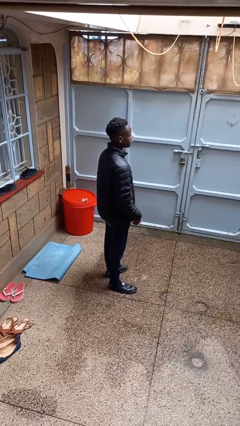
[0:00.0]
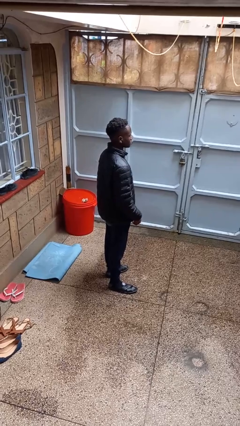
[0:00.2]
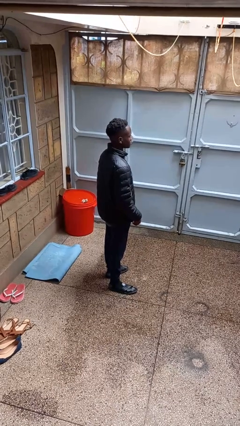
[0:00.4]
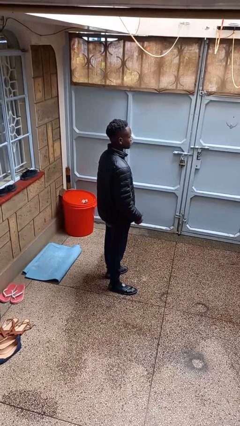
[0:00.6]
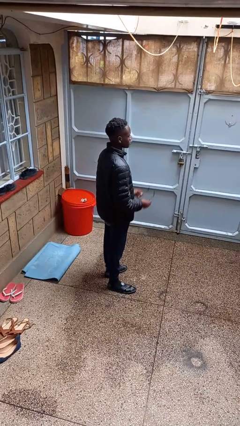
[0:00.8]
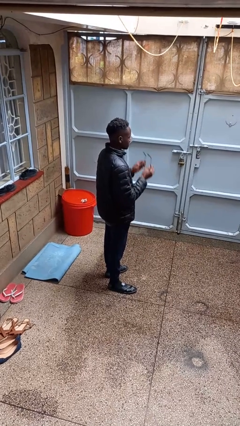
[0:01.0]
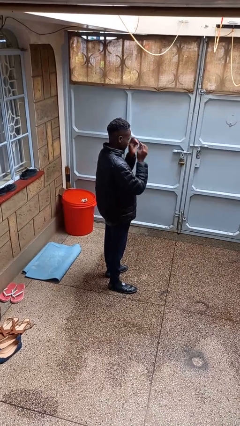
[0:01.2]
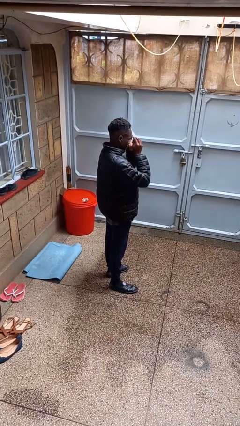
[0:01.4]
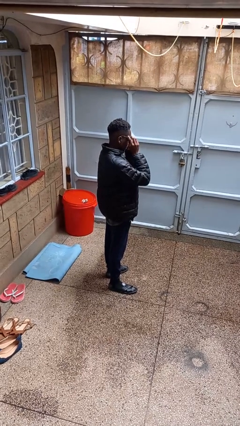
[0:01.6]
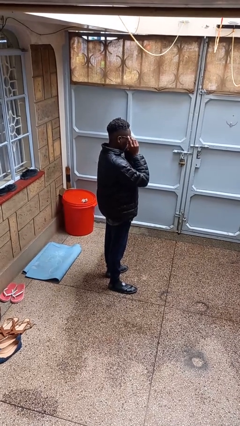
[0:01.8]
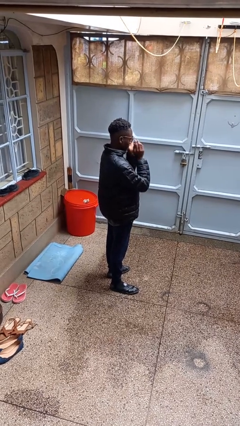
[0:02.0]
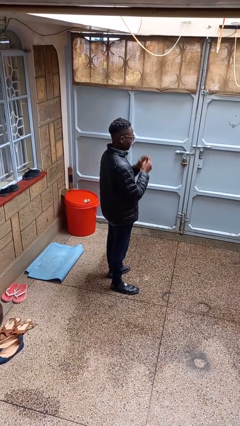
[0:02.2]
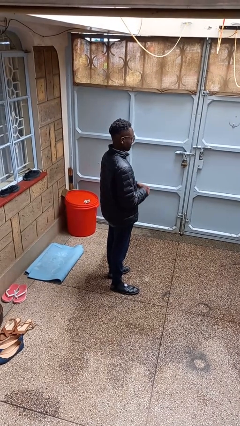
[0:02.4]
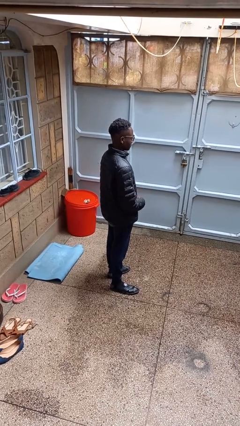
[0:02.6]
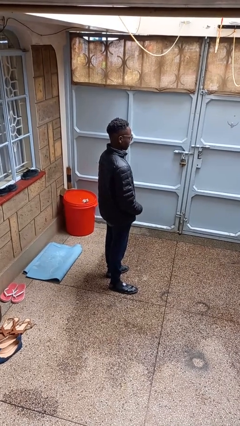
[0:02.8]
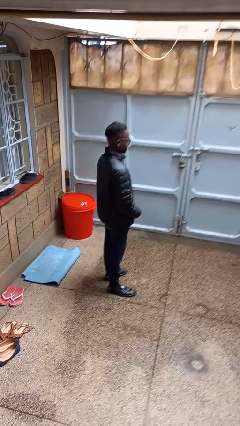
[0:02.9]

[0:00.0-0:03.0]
person puts on glasses

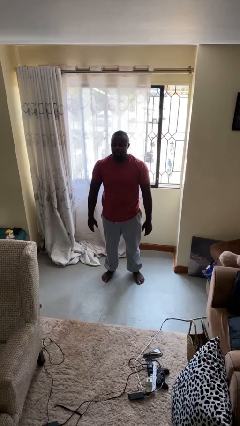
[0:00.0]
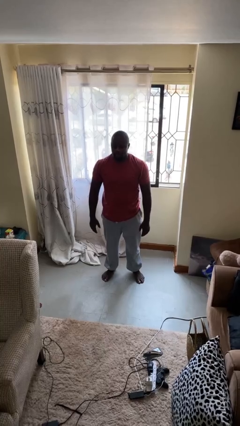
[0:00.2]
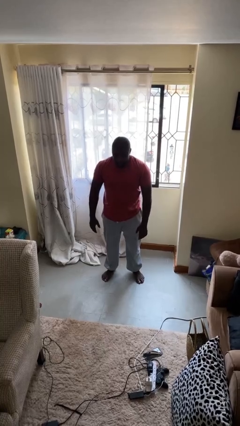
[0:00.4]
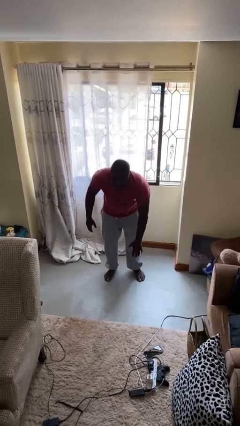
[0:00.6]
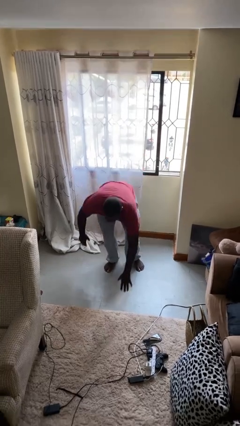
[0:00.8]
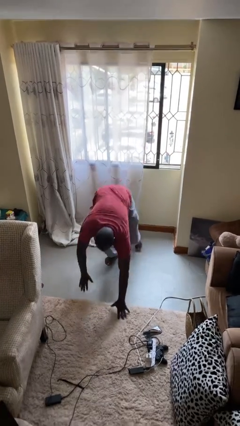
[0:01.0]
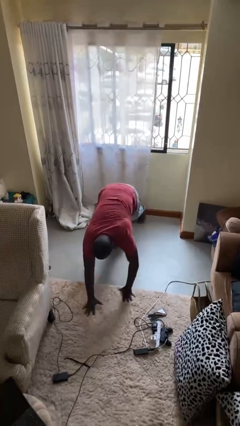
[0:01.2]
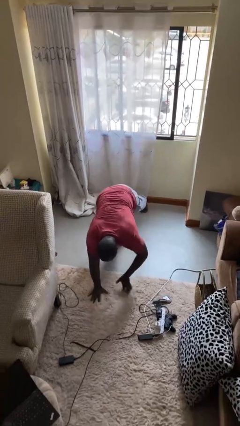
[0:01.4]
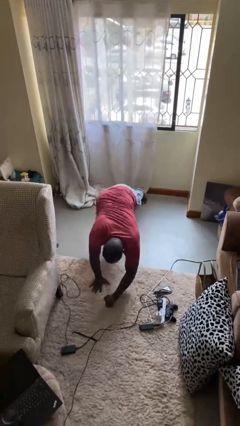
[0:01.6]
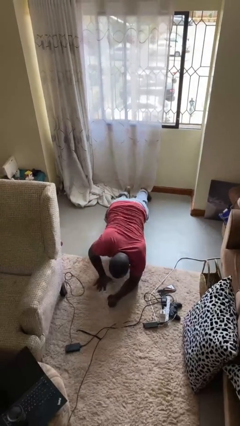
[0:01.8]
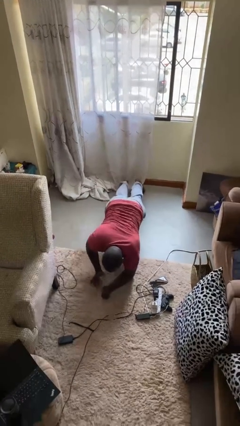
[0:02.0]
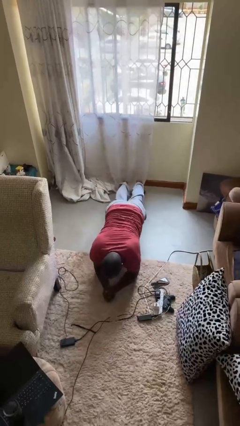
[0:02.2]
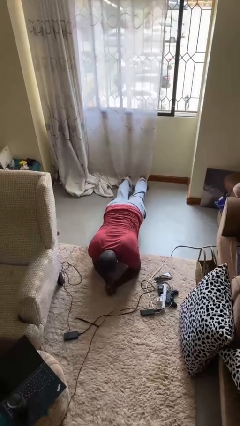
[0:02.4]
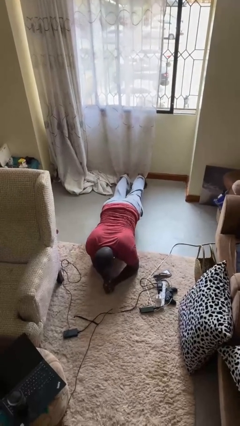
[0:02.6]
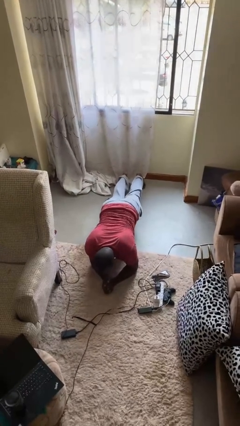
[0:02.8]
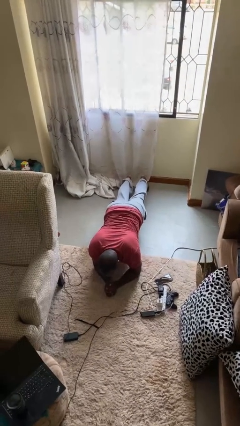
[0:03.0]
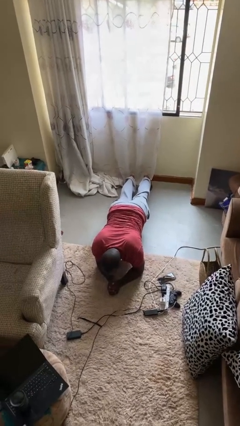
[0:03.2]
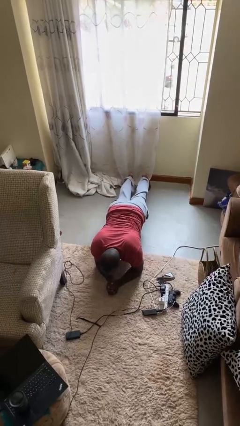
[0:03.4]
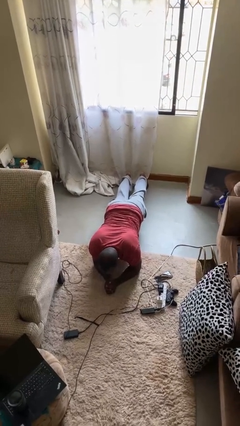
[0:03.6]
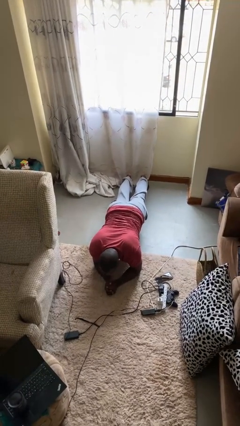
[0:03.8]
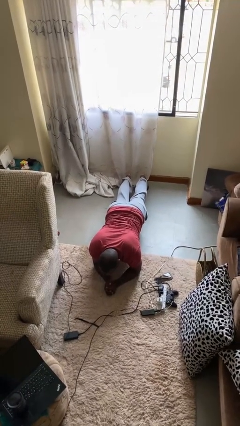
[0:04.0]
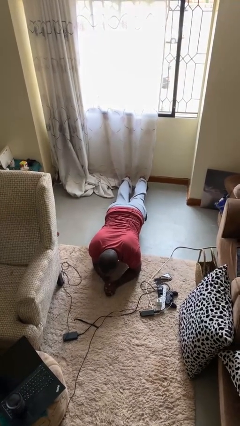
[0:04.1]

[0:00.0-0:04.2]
person exercises with plank

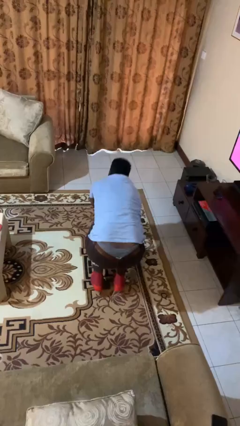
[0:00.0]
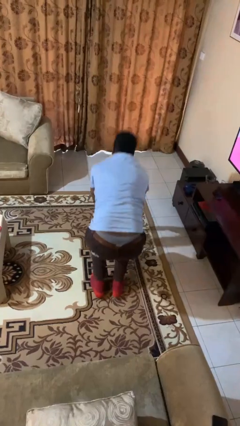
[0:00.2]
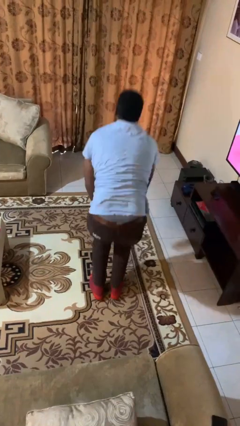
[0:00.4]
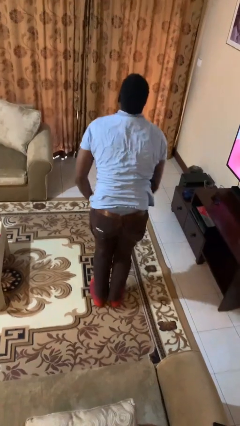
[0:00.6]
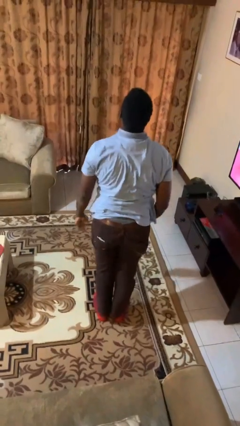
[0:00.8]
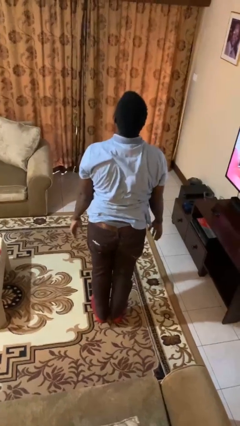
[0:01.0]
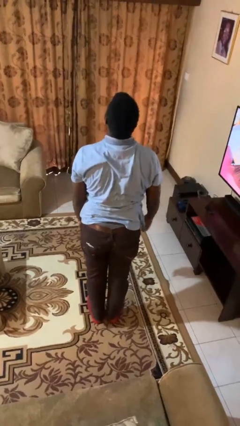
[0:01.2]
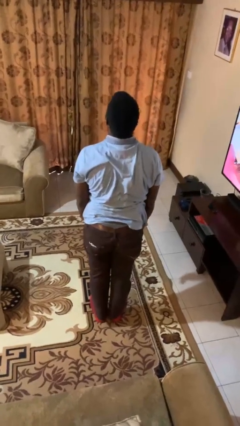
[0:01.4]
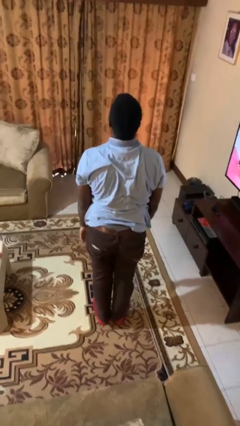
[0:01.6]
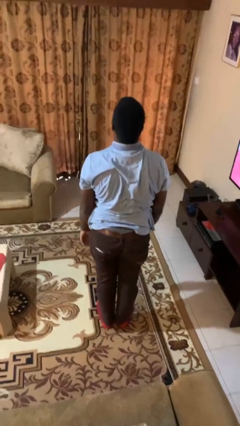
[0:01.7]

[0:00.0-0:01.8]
person stands up from floor

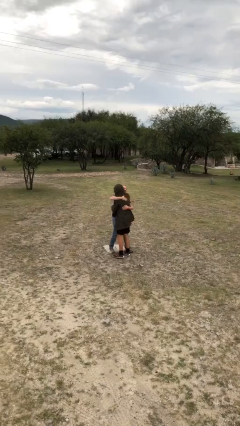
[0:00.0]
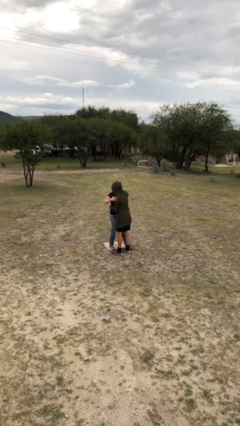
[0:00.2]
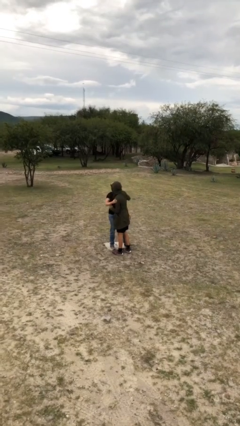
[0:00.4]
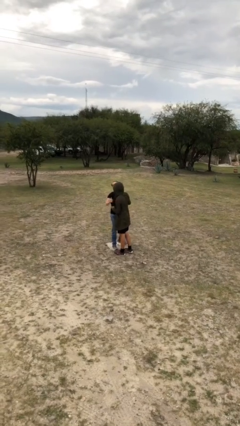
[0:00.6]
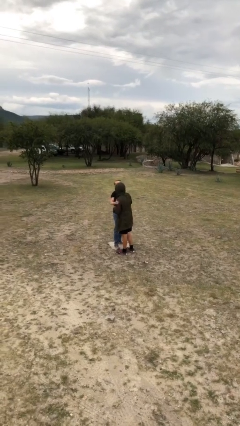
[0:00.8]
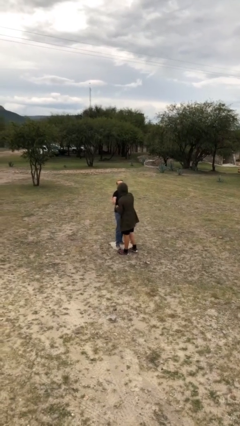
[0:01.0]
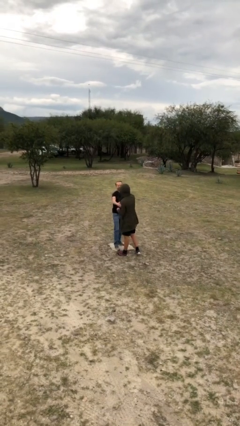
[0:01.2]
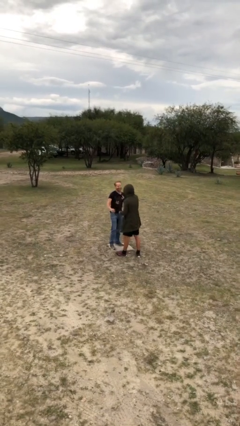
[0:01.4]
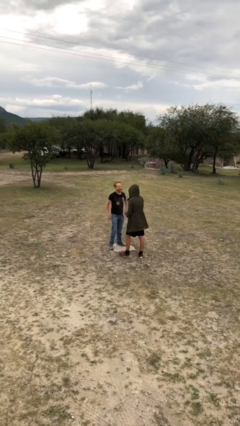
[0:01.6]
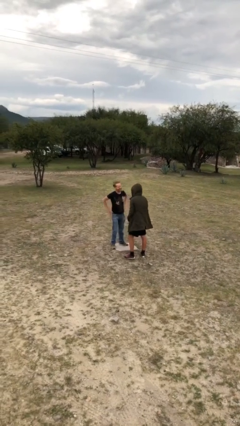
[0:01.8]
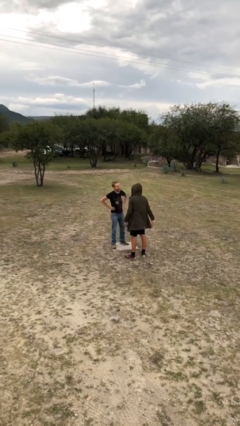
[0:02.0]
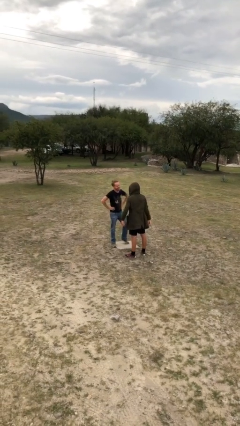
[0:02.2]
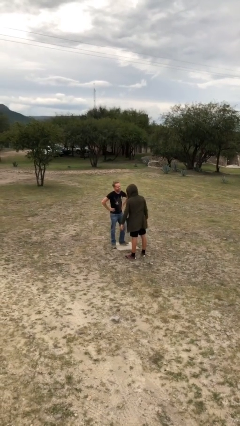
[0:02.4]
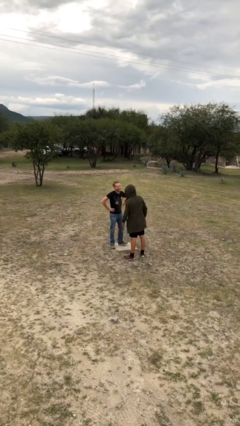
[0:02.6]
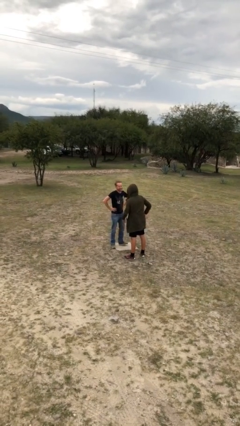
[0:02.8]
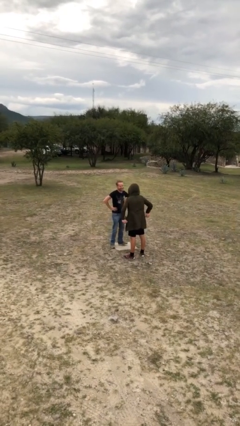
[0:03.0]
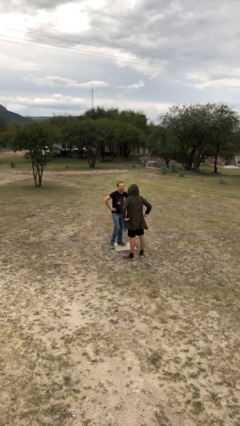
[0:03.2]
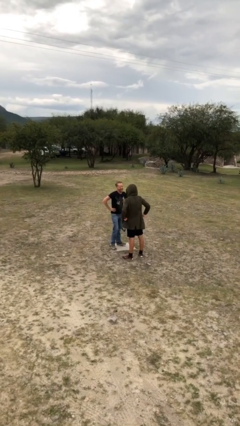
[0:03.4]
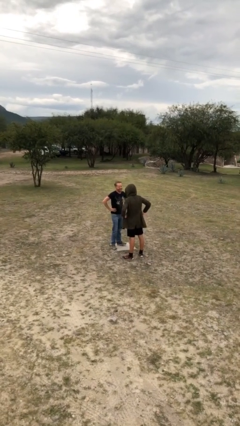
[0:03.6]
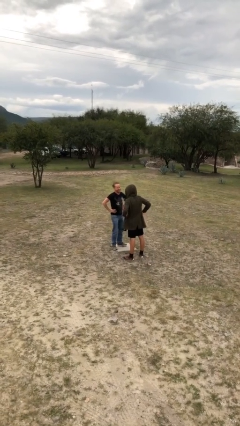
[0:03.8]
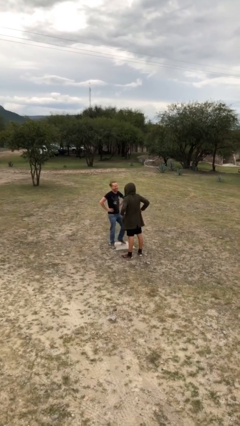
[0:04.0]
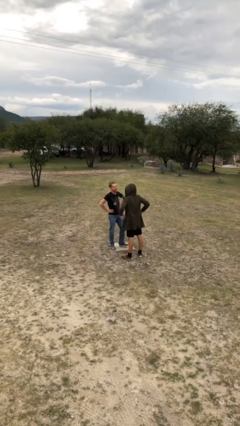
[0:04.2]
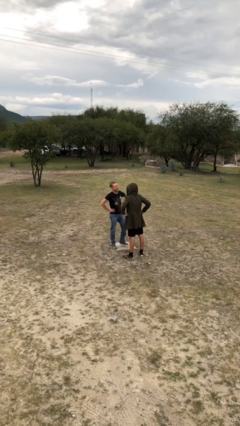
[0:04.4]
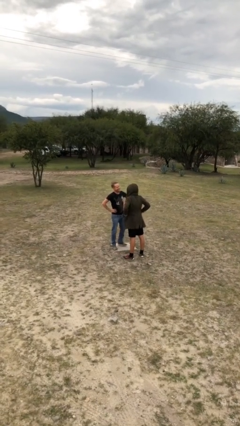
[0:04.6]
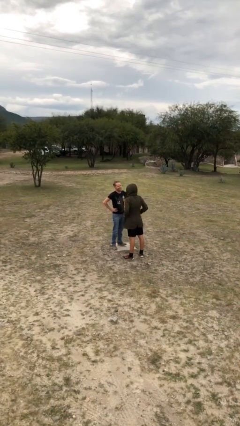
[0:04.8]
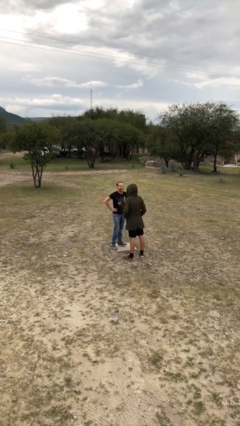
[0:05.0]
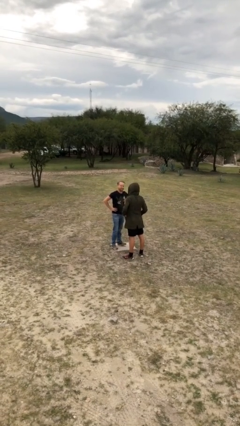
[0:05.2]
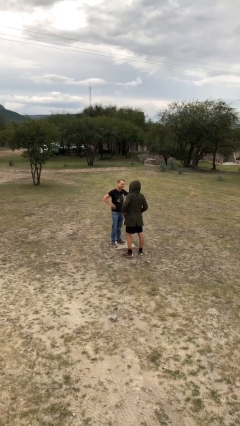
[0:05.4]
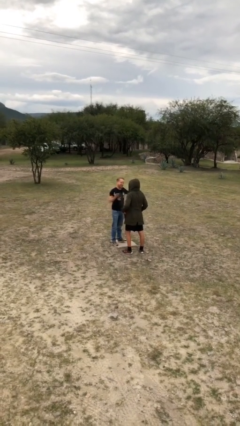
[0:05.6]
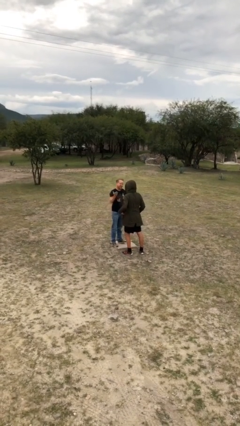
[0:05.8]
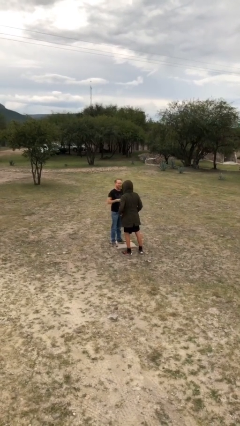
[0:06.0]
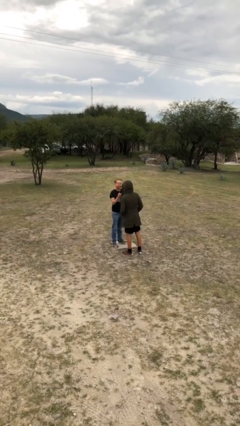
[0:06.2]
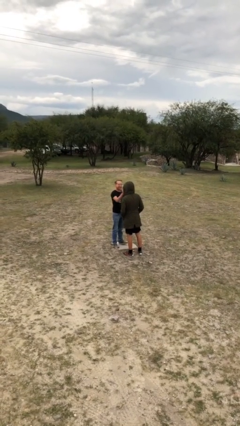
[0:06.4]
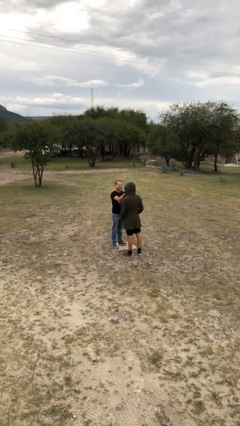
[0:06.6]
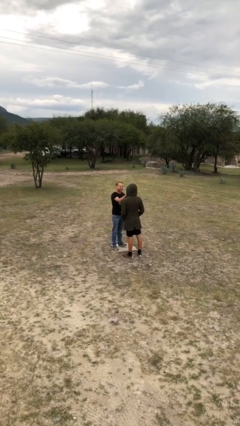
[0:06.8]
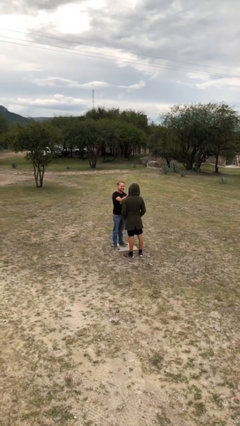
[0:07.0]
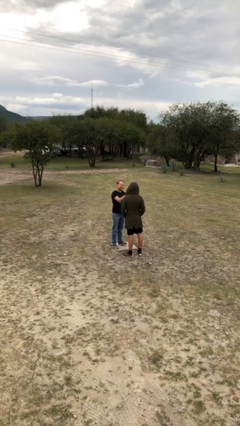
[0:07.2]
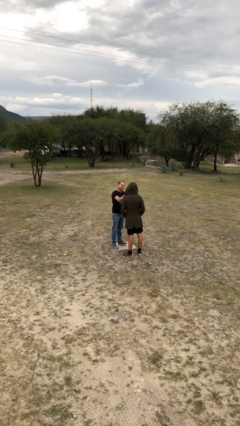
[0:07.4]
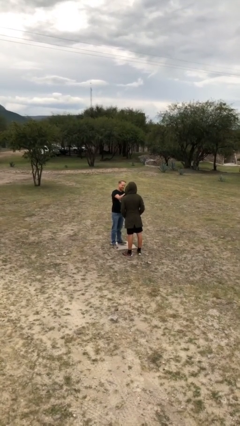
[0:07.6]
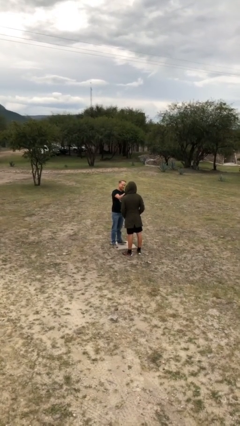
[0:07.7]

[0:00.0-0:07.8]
person talks to person

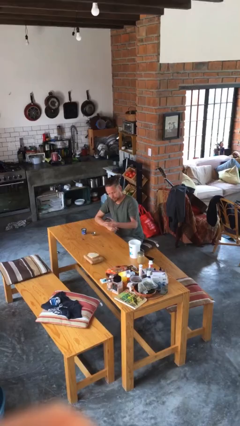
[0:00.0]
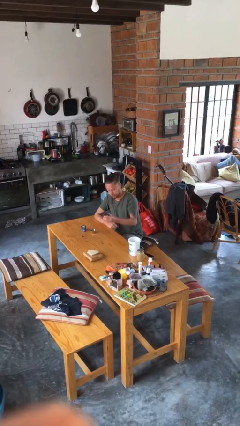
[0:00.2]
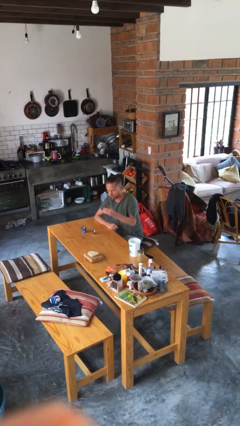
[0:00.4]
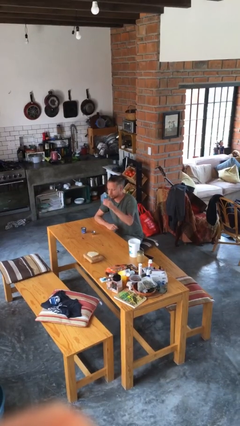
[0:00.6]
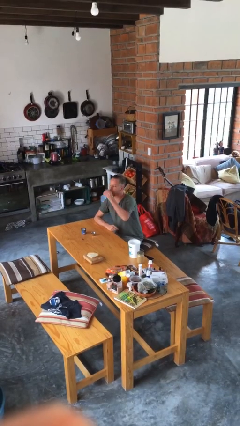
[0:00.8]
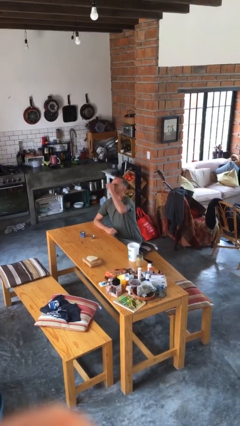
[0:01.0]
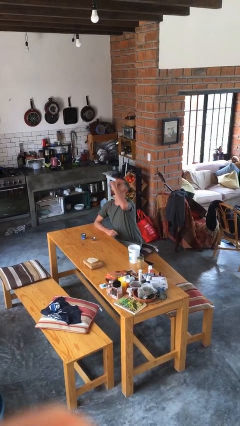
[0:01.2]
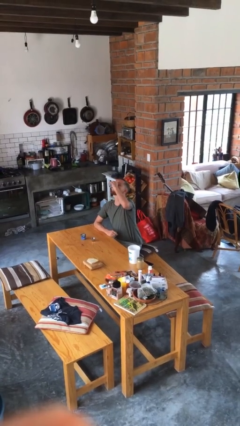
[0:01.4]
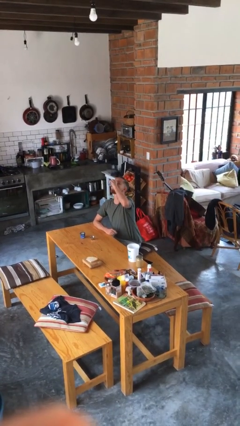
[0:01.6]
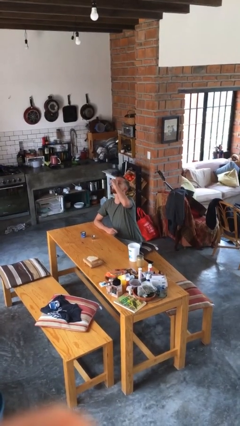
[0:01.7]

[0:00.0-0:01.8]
person drinks from shotglass
